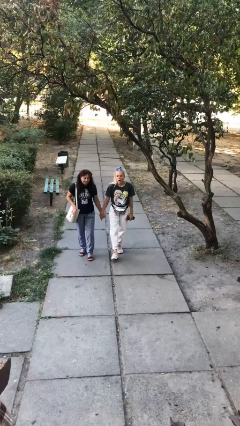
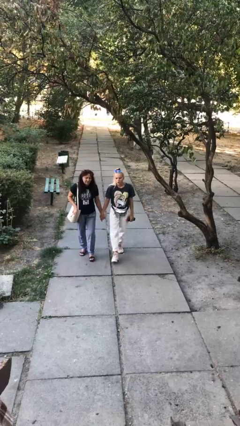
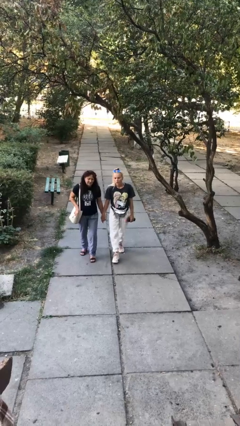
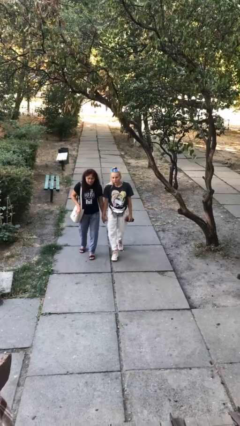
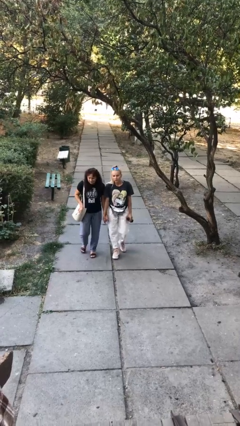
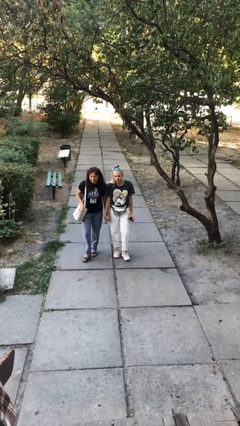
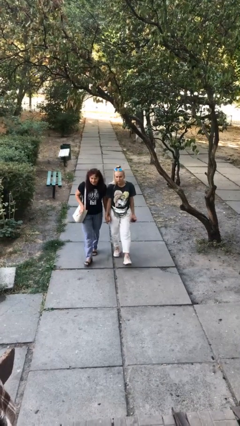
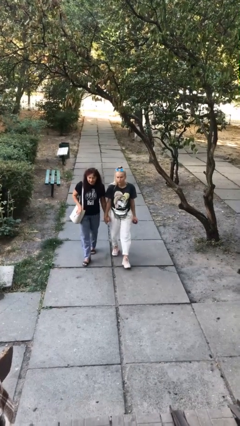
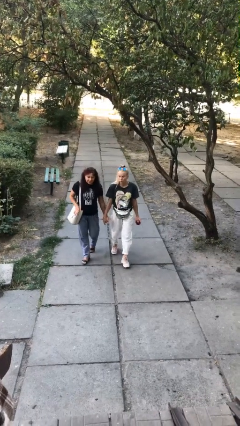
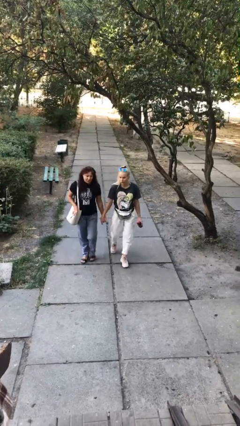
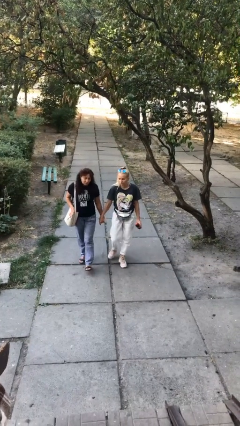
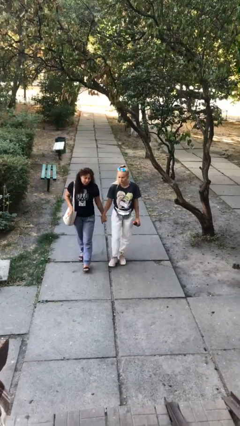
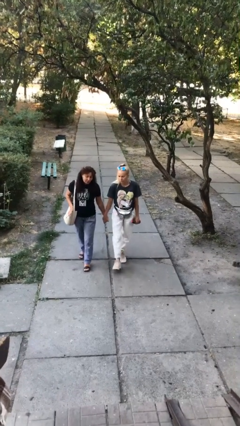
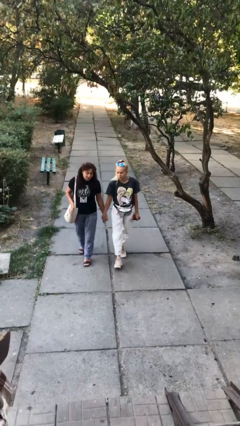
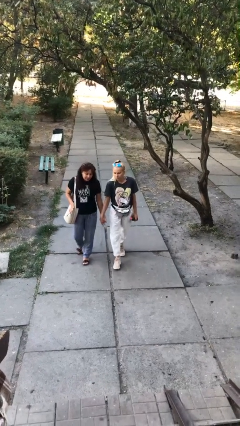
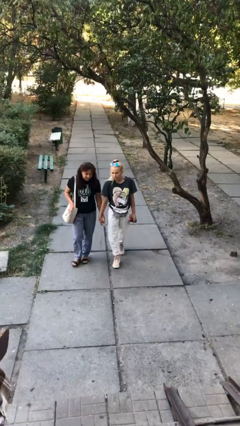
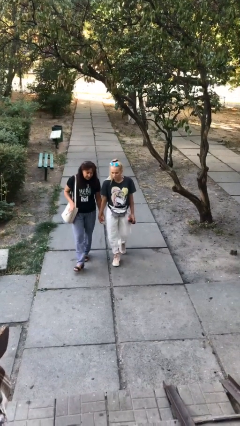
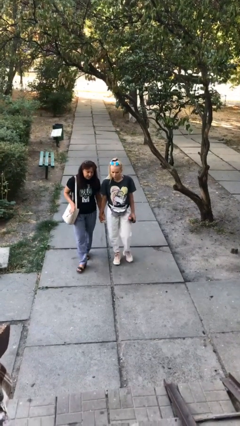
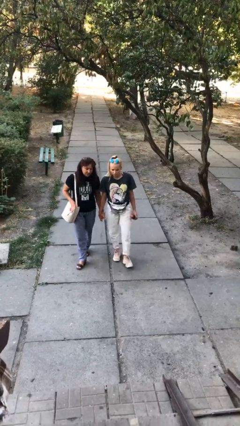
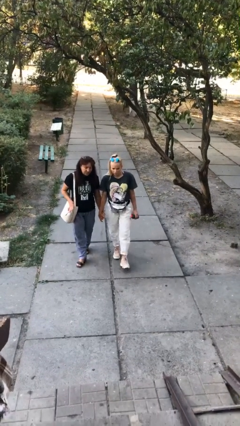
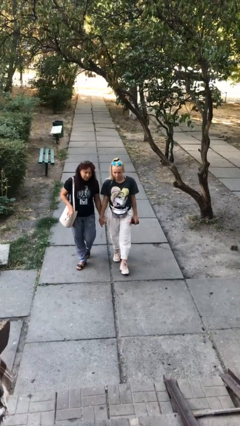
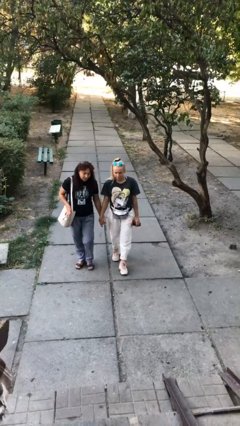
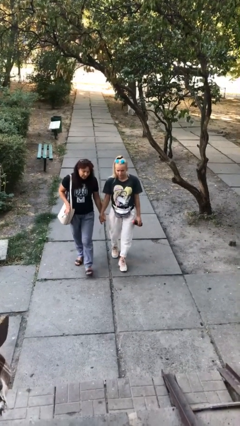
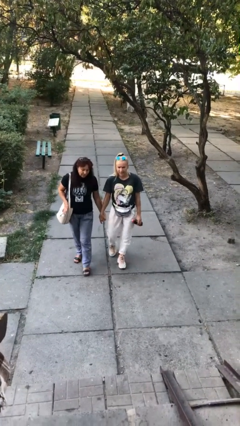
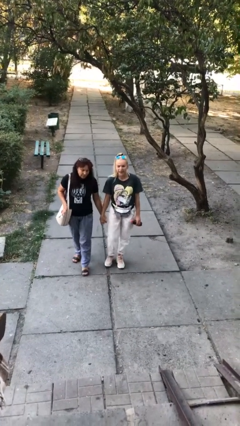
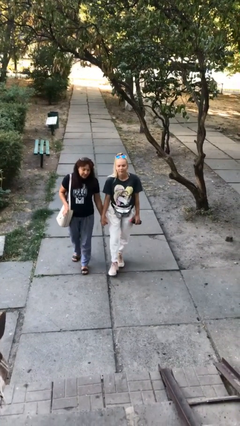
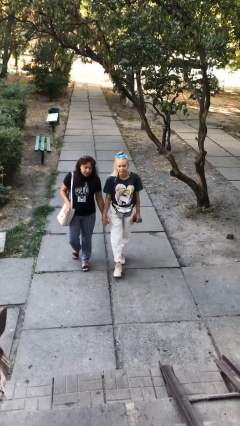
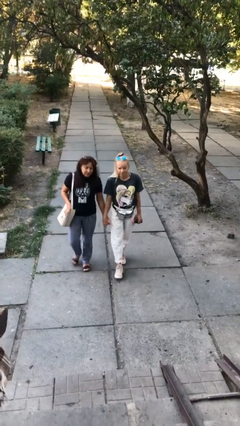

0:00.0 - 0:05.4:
person holds hand

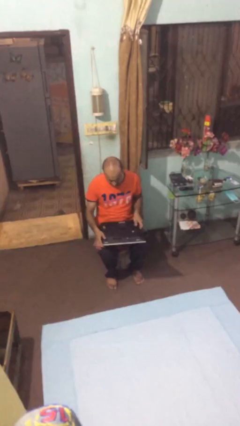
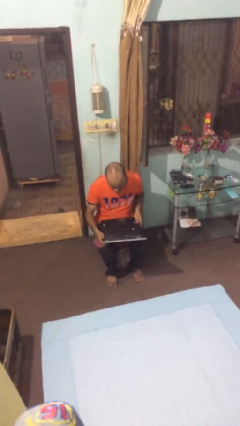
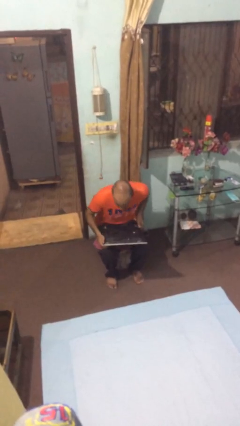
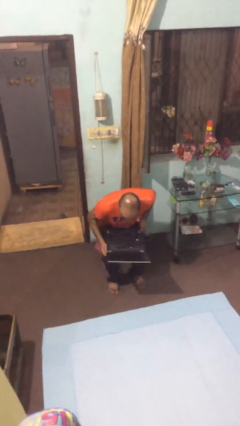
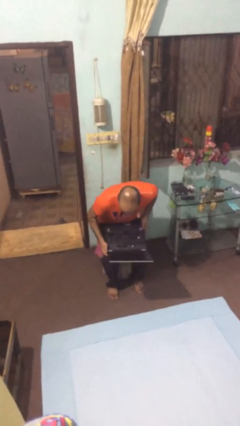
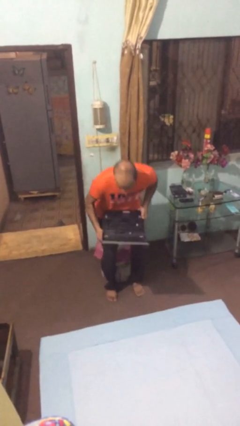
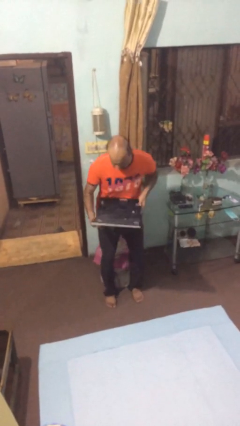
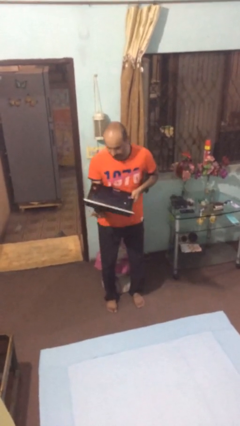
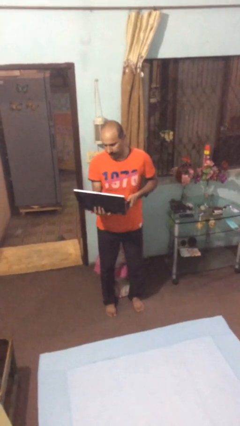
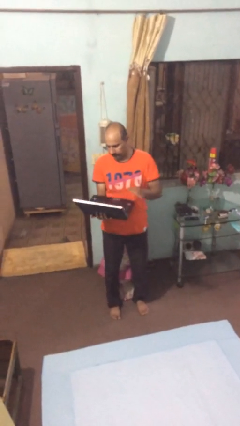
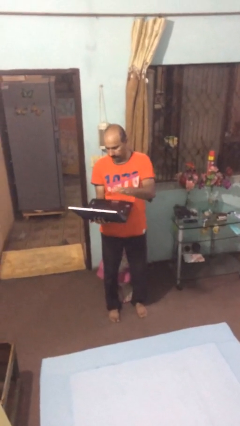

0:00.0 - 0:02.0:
person stands up

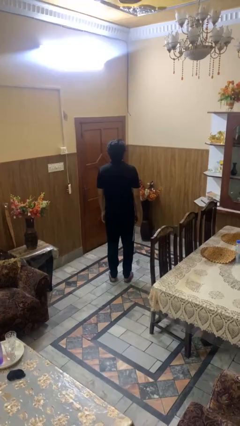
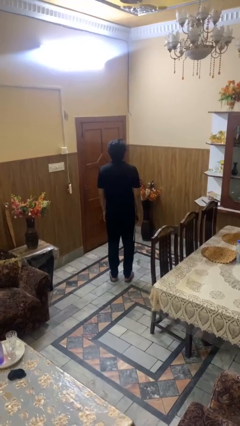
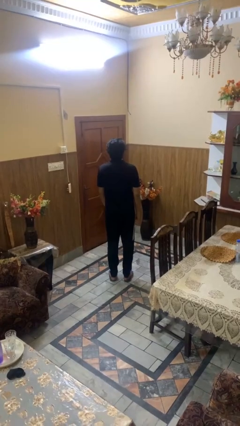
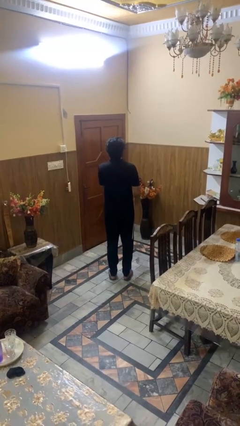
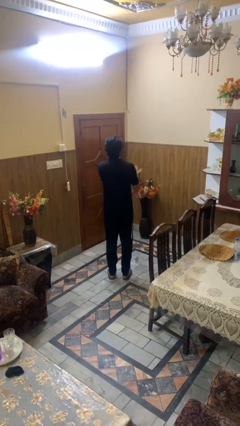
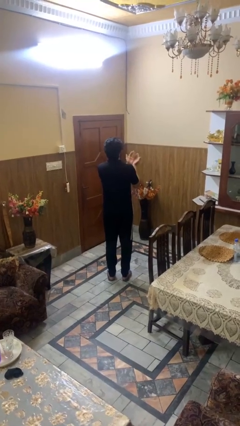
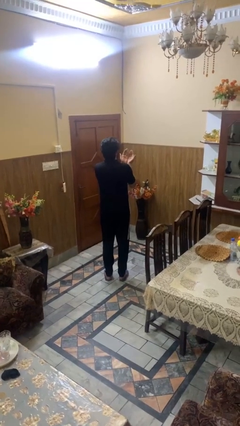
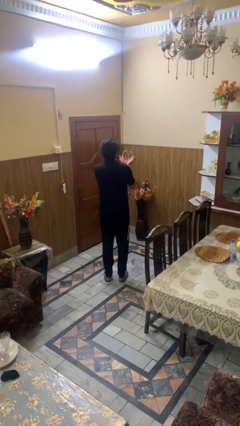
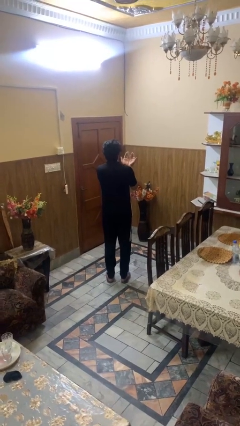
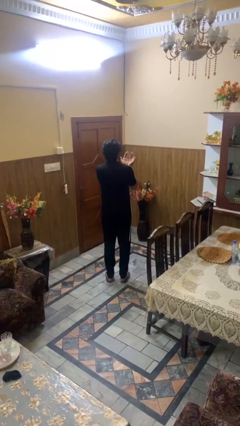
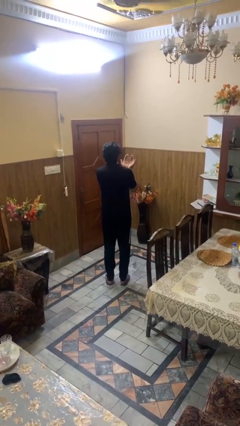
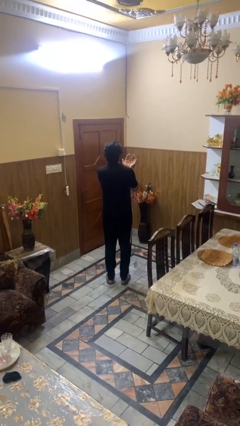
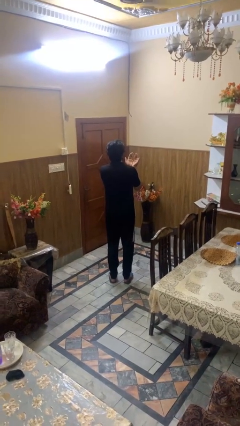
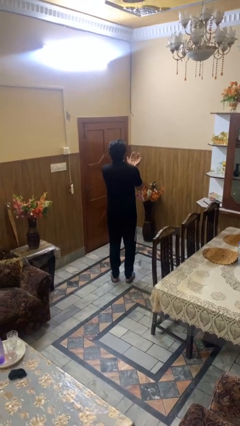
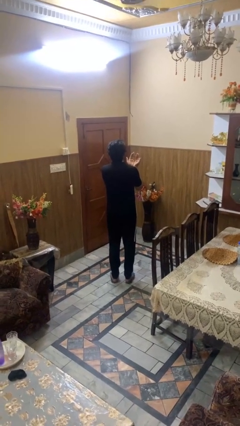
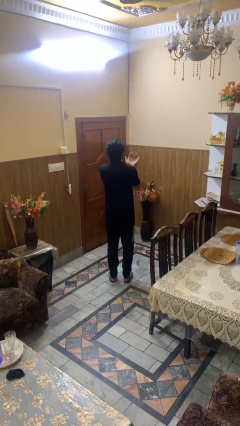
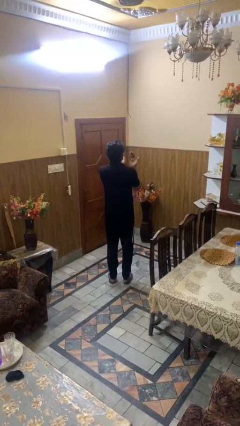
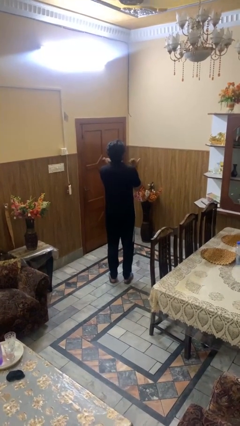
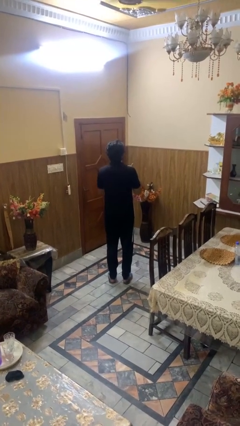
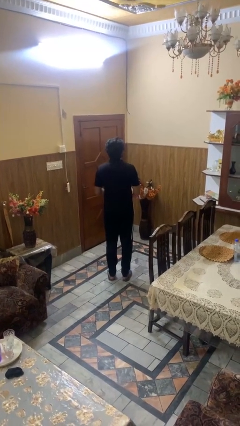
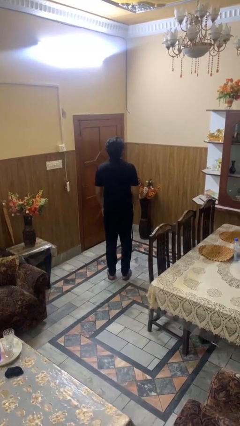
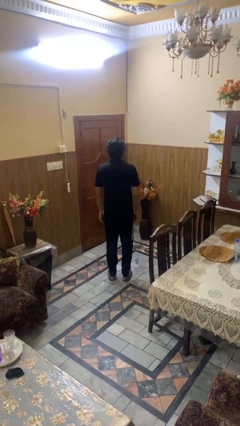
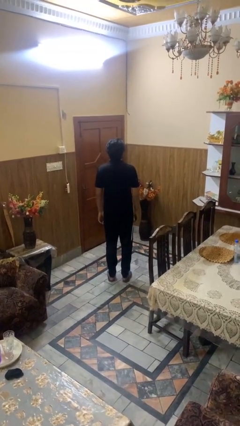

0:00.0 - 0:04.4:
person prays

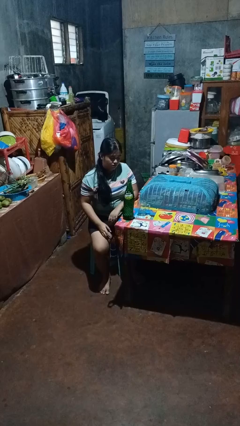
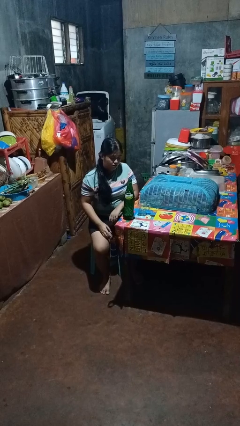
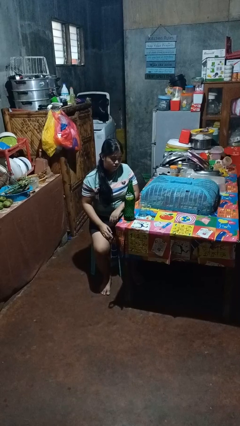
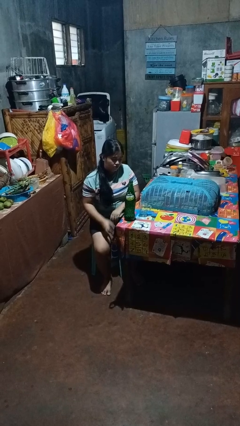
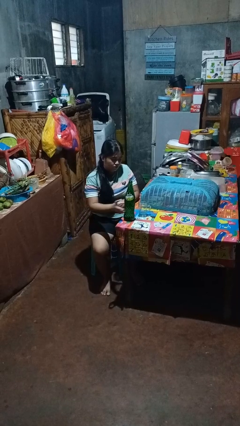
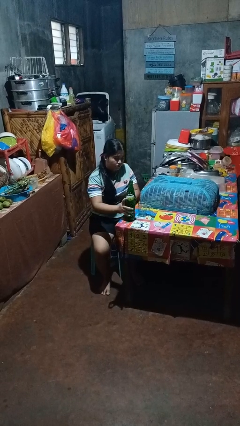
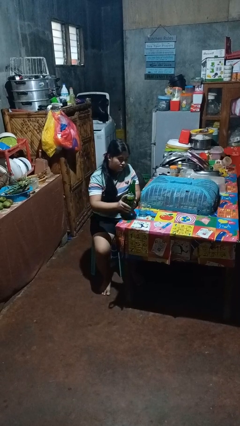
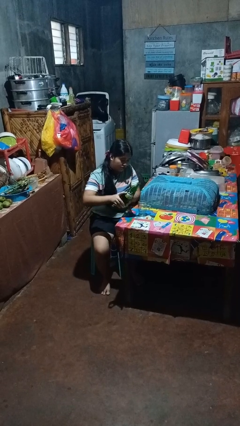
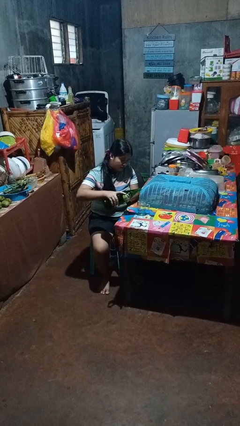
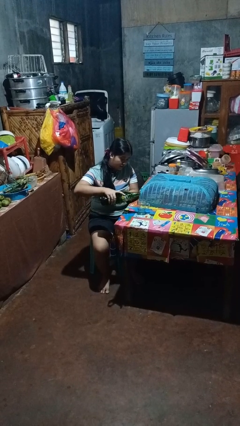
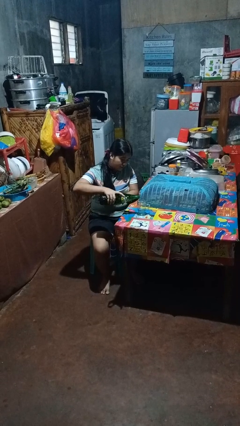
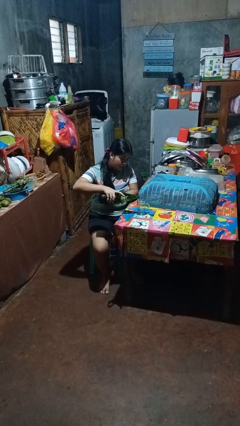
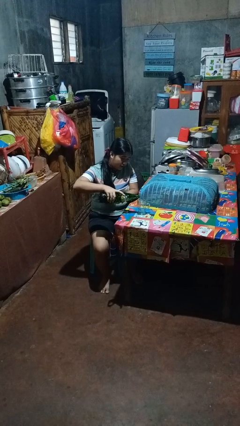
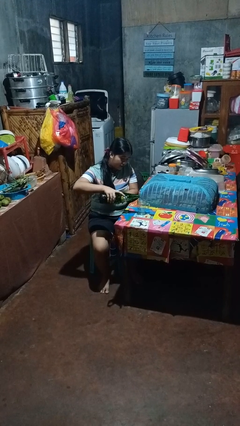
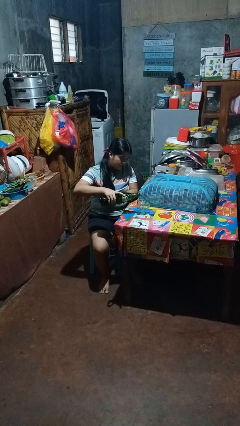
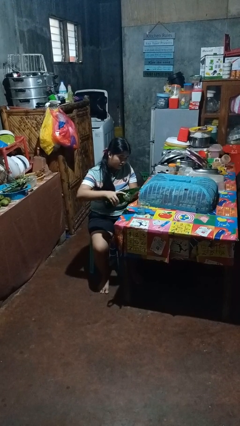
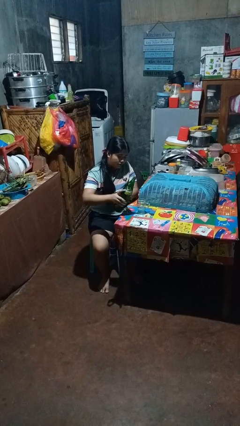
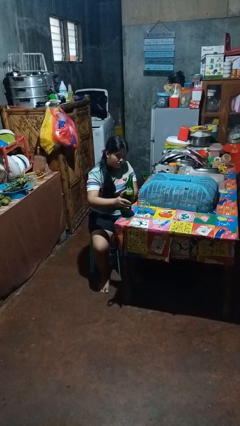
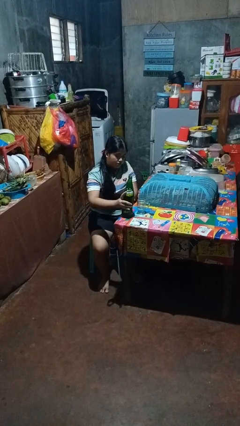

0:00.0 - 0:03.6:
person pours liquid into cup

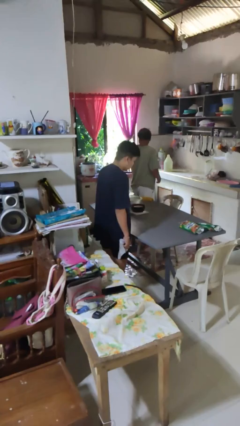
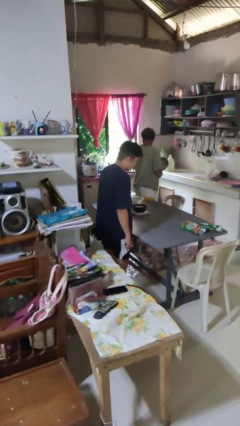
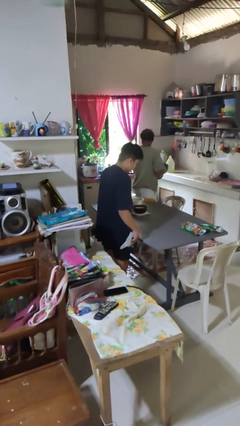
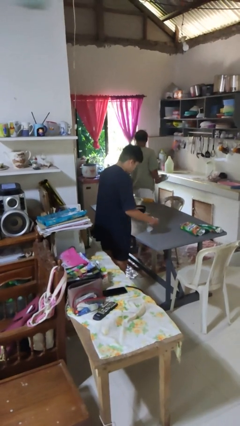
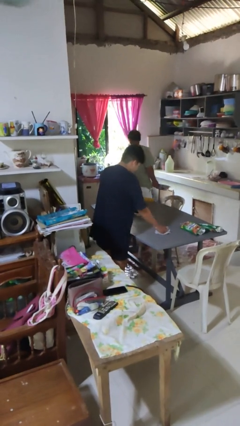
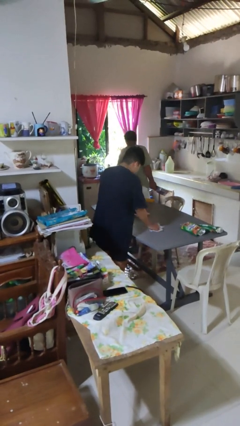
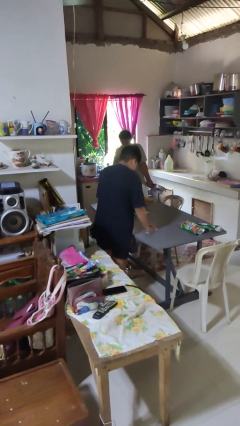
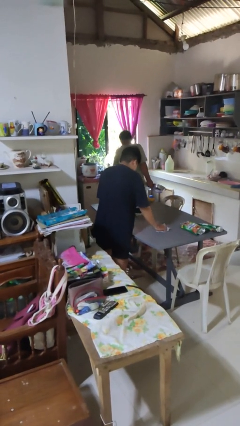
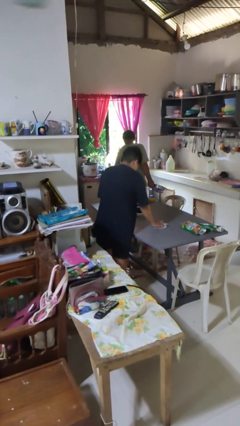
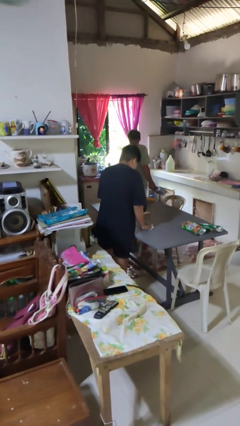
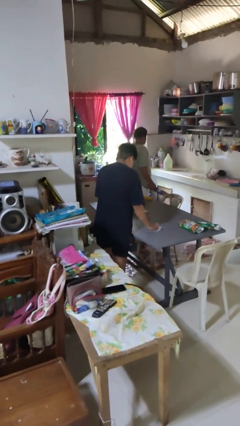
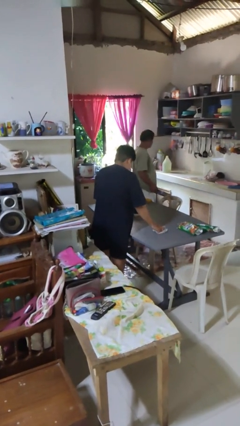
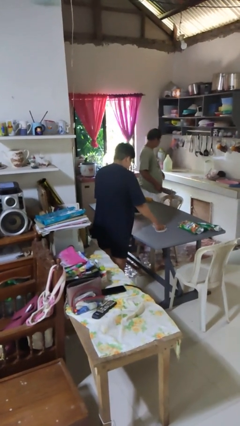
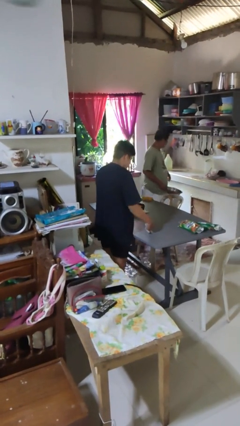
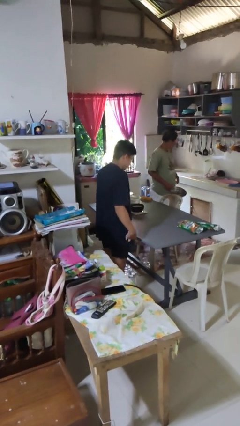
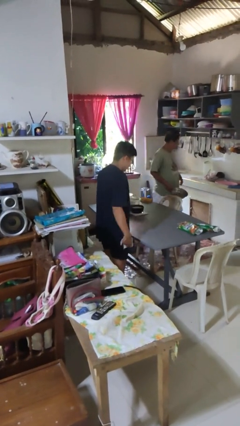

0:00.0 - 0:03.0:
person cleans table with rag
